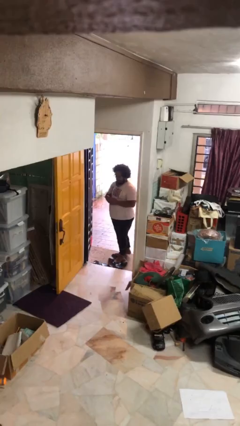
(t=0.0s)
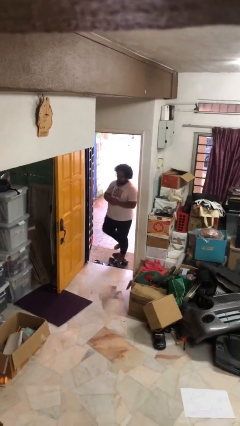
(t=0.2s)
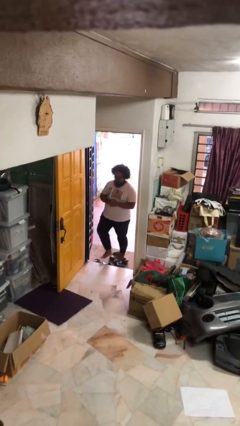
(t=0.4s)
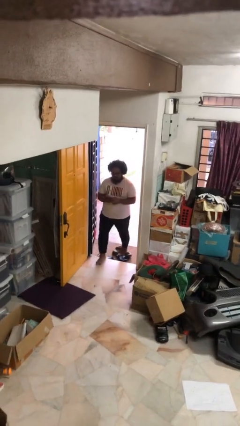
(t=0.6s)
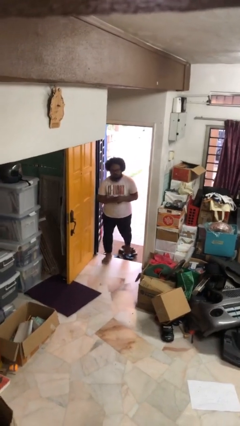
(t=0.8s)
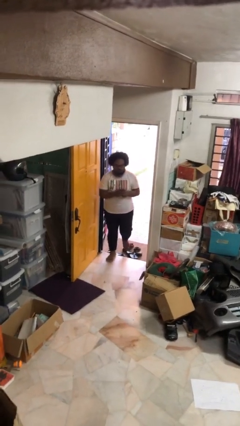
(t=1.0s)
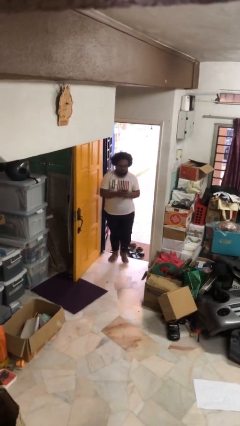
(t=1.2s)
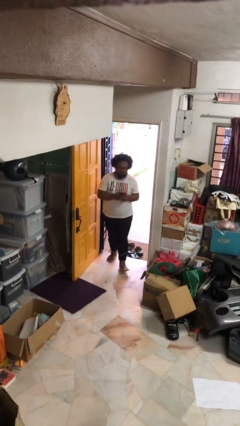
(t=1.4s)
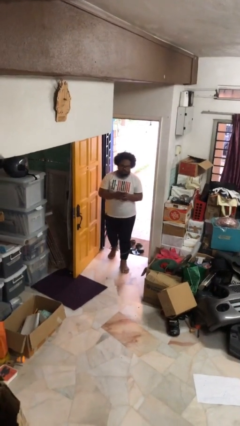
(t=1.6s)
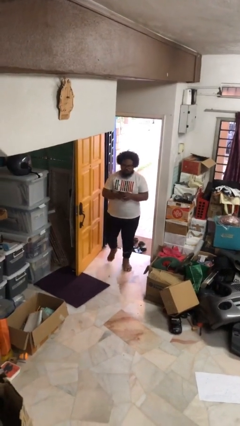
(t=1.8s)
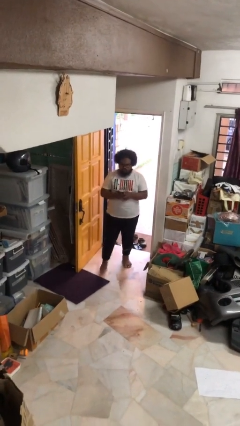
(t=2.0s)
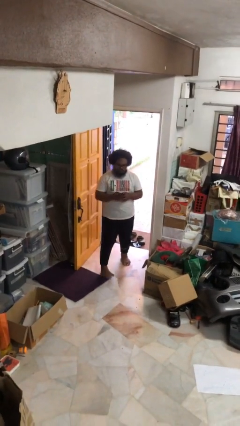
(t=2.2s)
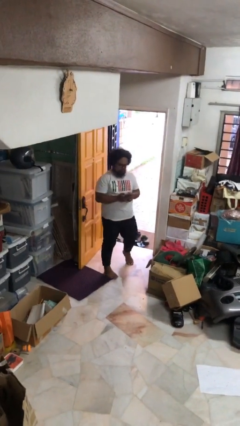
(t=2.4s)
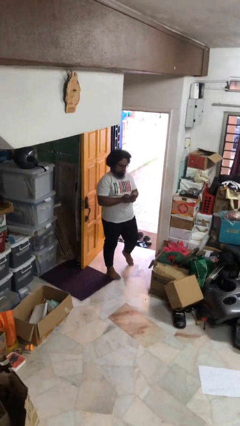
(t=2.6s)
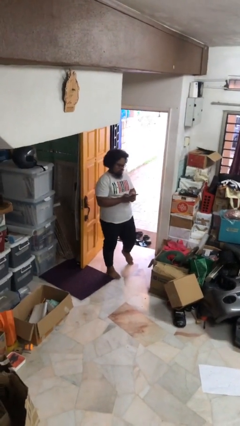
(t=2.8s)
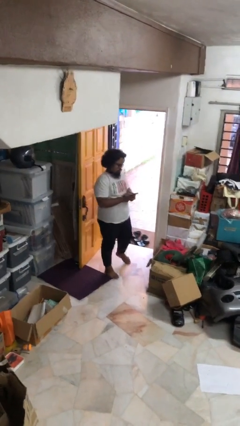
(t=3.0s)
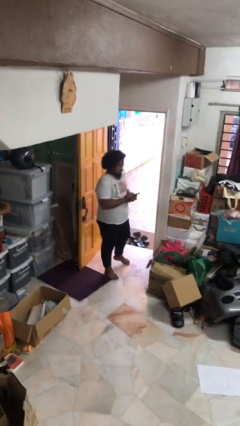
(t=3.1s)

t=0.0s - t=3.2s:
person enters scene through structure

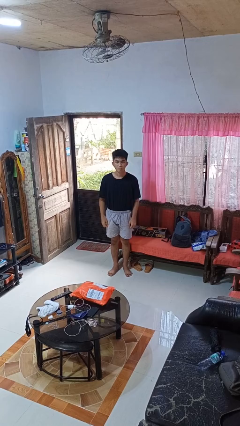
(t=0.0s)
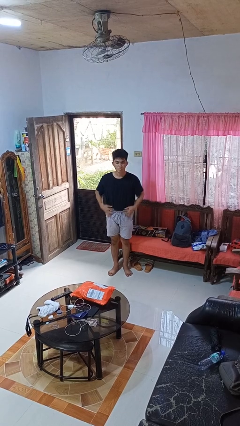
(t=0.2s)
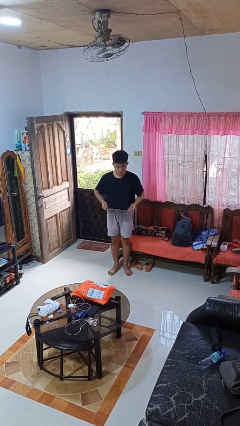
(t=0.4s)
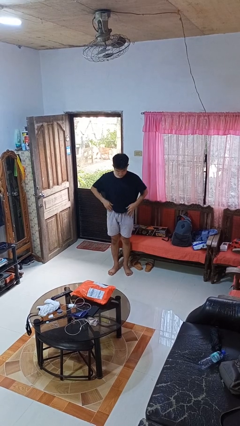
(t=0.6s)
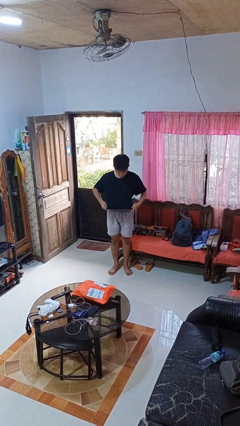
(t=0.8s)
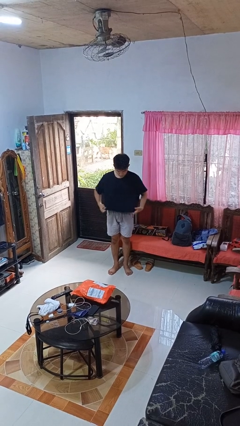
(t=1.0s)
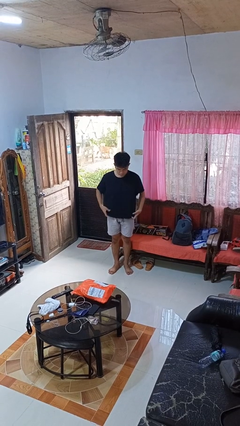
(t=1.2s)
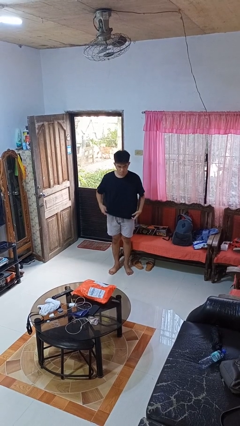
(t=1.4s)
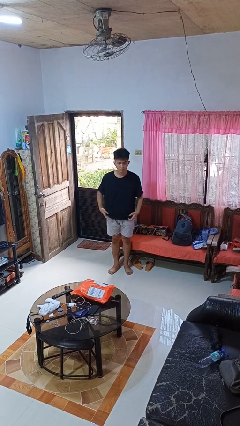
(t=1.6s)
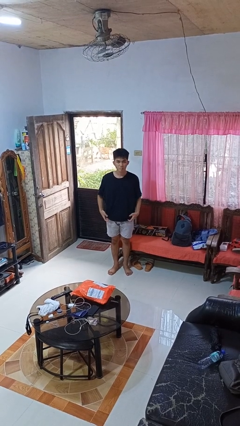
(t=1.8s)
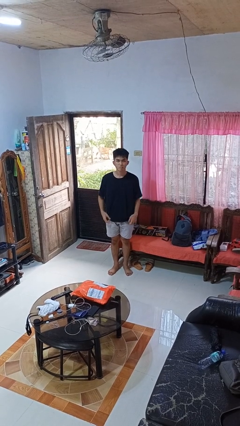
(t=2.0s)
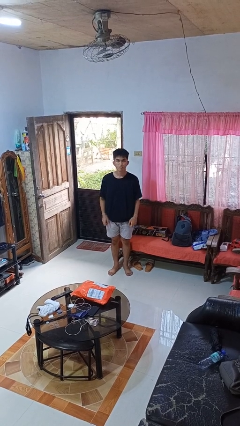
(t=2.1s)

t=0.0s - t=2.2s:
person untucks shirt

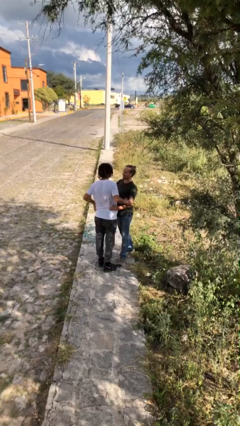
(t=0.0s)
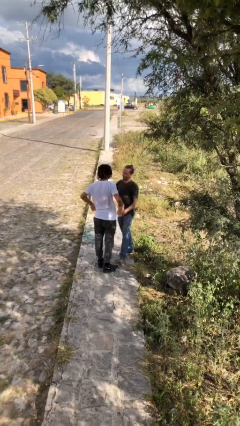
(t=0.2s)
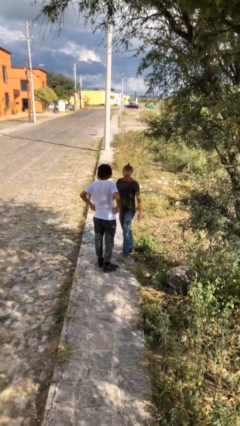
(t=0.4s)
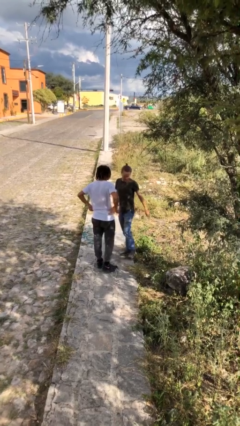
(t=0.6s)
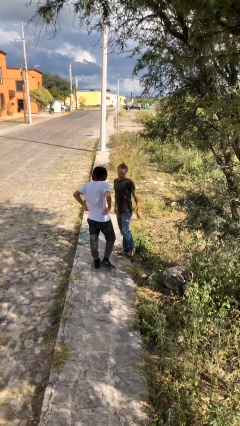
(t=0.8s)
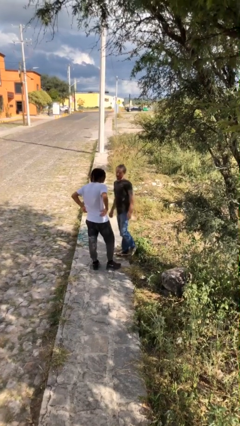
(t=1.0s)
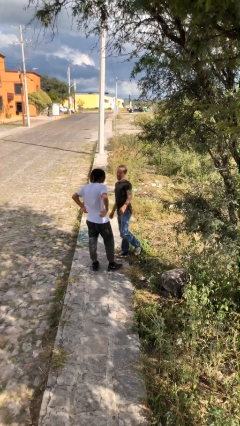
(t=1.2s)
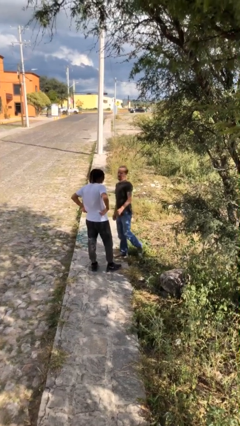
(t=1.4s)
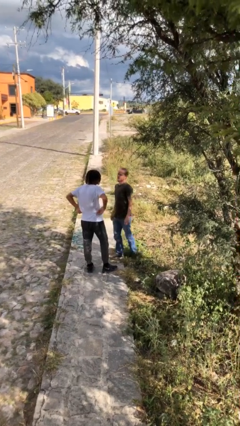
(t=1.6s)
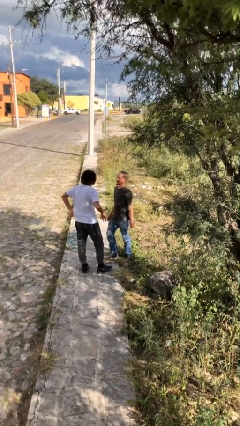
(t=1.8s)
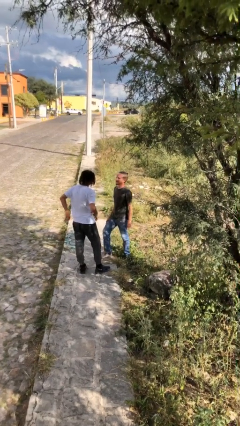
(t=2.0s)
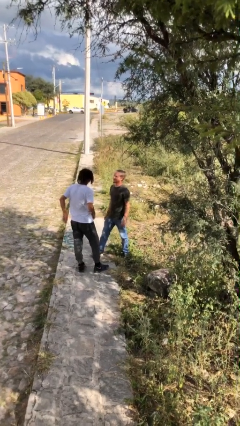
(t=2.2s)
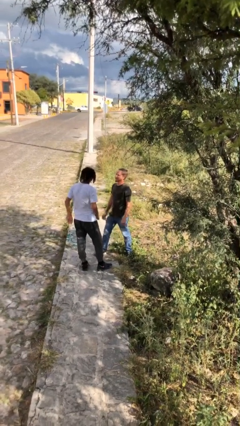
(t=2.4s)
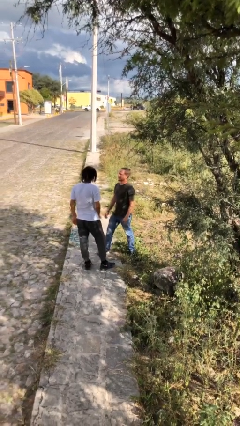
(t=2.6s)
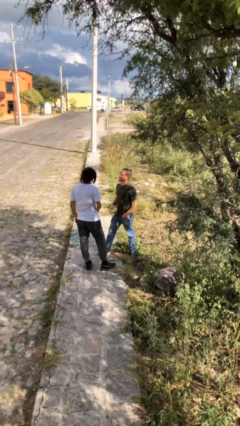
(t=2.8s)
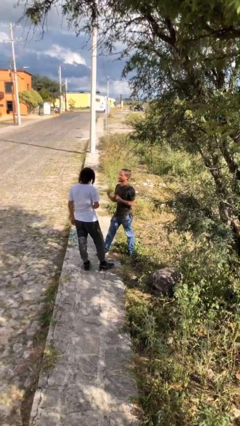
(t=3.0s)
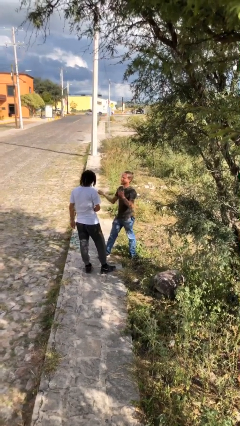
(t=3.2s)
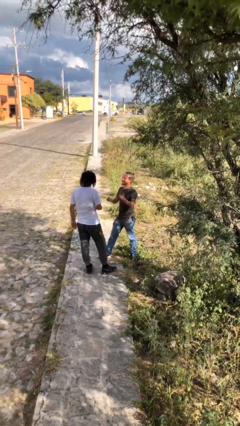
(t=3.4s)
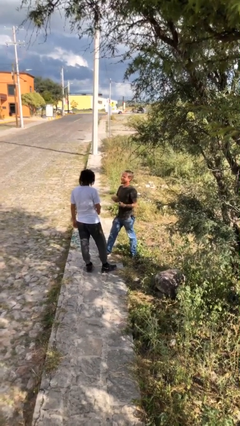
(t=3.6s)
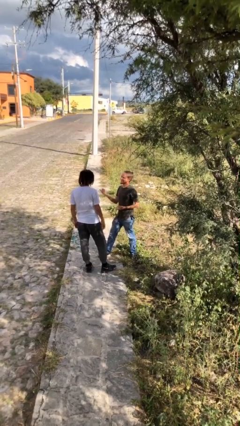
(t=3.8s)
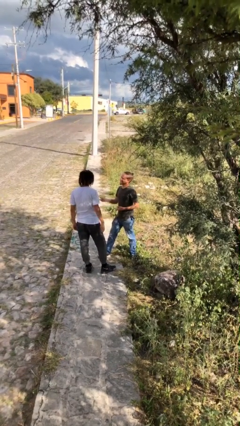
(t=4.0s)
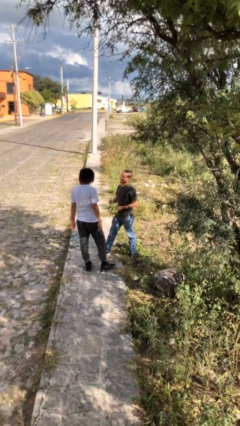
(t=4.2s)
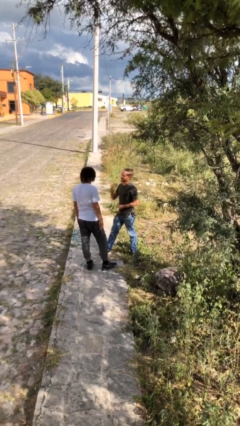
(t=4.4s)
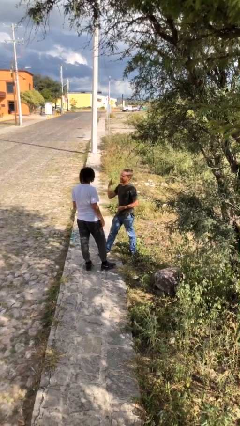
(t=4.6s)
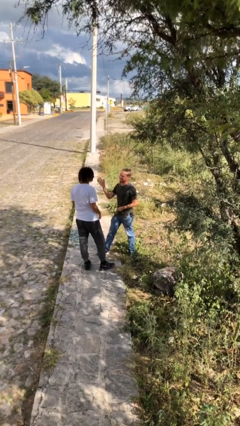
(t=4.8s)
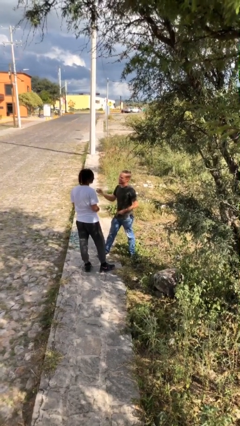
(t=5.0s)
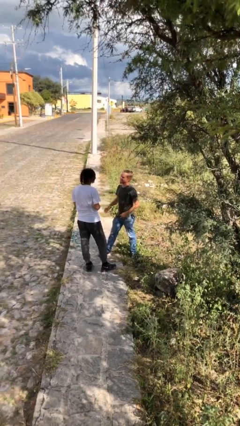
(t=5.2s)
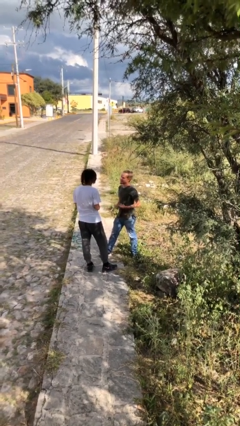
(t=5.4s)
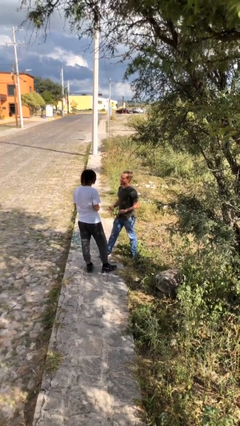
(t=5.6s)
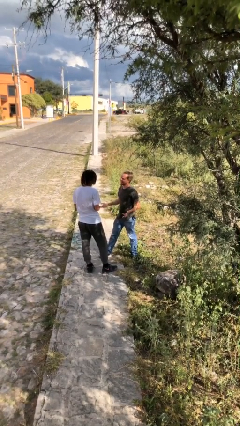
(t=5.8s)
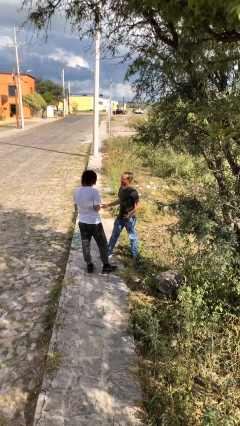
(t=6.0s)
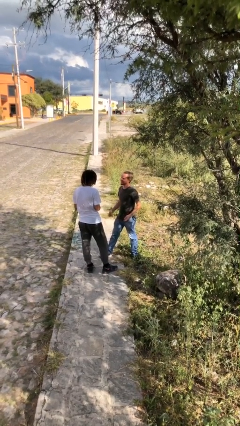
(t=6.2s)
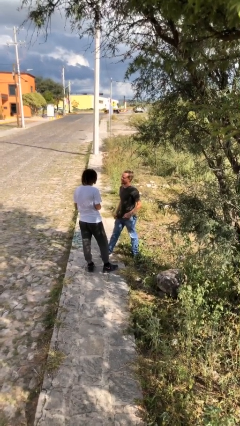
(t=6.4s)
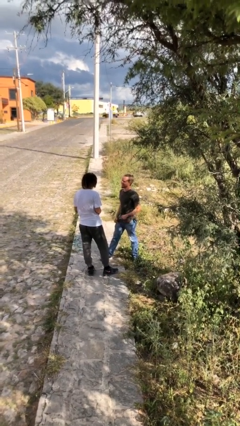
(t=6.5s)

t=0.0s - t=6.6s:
person talks to person

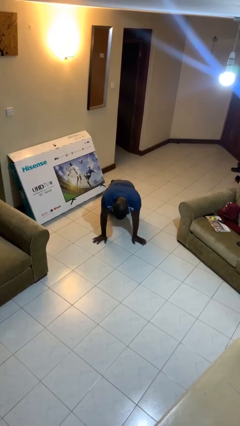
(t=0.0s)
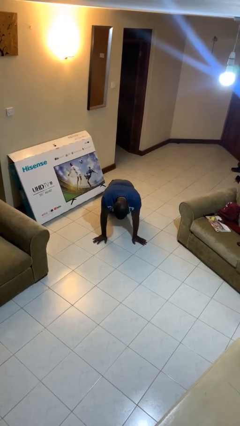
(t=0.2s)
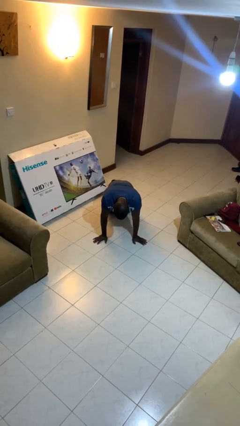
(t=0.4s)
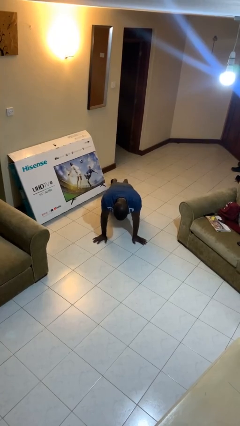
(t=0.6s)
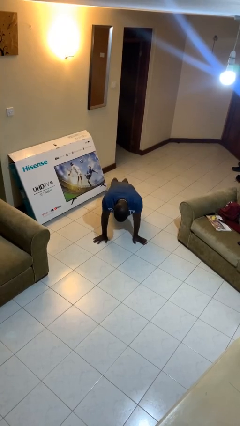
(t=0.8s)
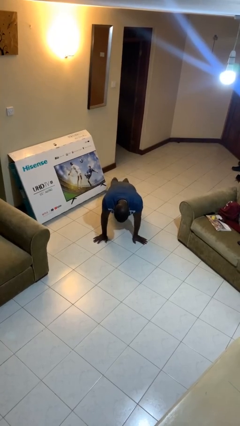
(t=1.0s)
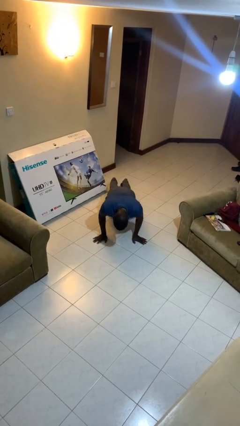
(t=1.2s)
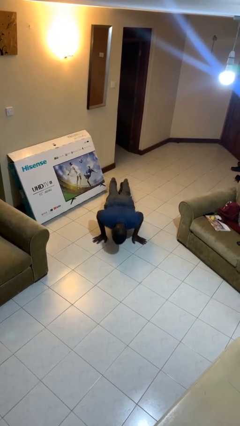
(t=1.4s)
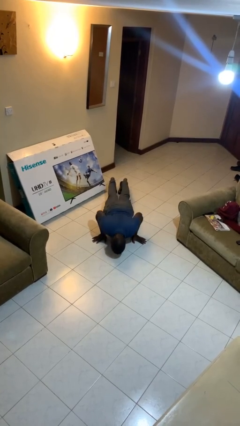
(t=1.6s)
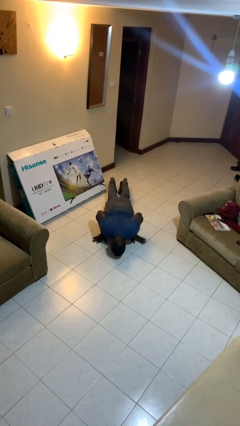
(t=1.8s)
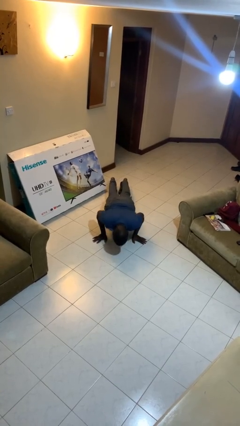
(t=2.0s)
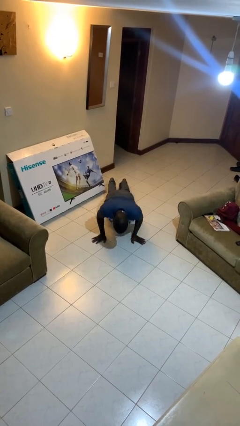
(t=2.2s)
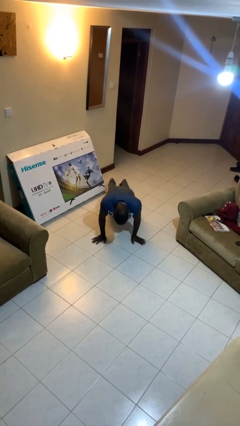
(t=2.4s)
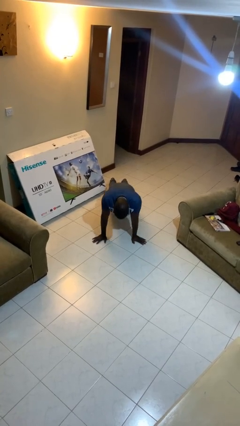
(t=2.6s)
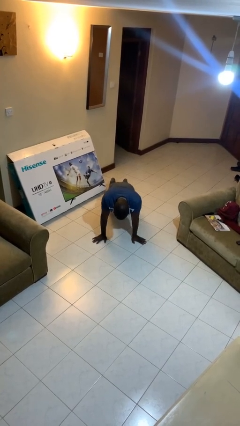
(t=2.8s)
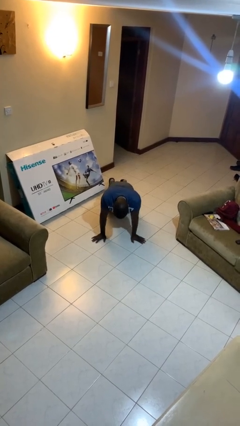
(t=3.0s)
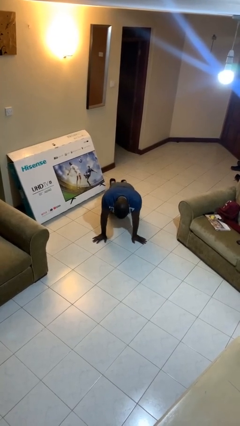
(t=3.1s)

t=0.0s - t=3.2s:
person exercises with pushup

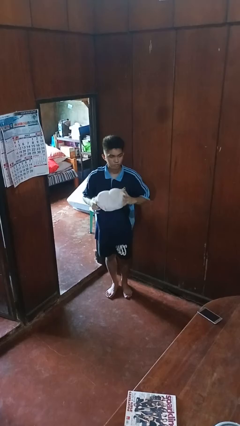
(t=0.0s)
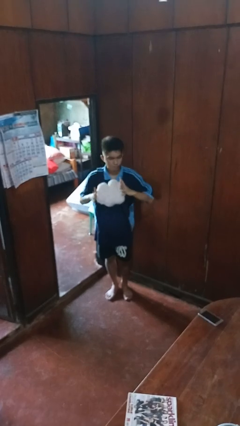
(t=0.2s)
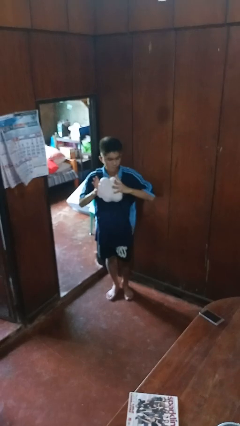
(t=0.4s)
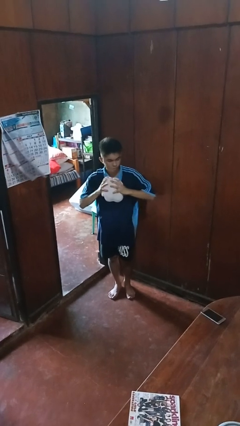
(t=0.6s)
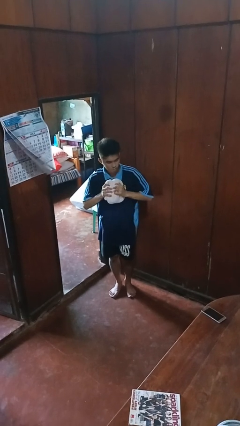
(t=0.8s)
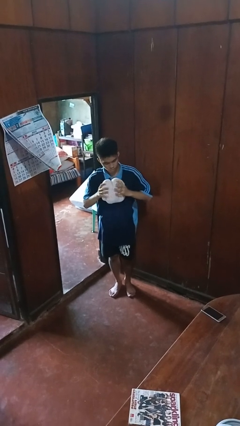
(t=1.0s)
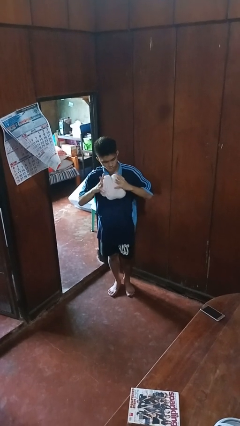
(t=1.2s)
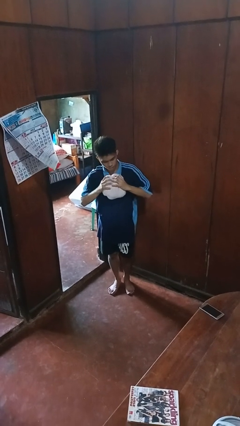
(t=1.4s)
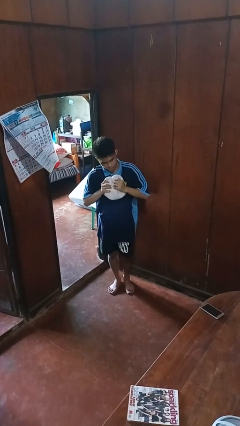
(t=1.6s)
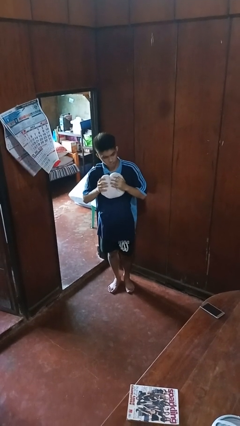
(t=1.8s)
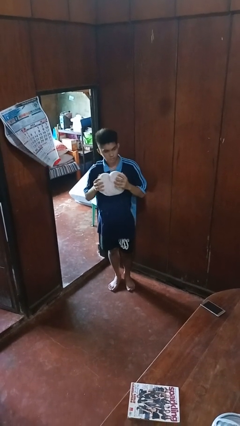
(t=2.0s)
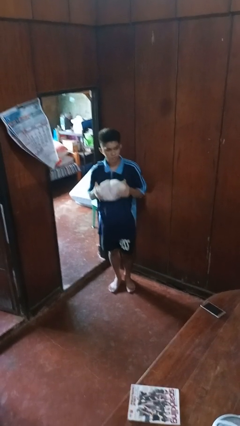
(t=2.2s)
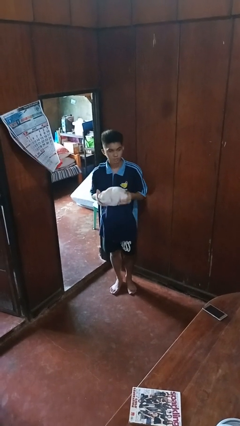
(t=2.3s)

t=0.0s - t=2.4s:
person squeezes object
